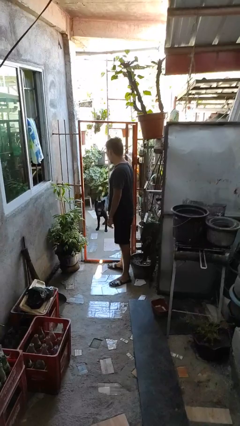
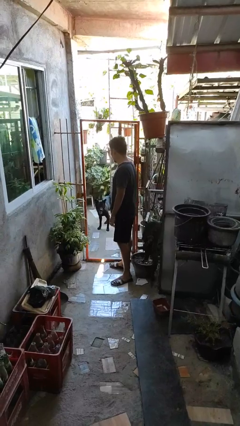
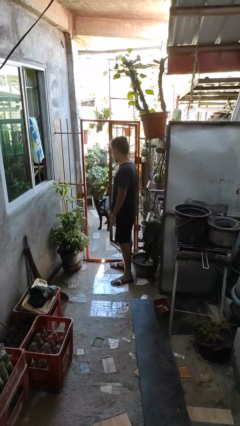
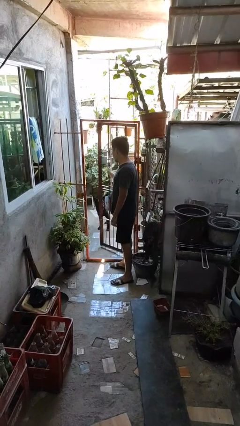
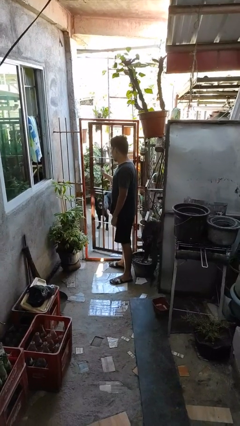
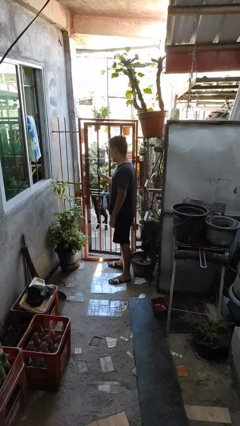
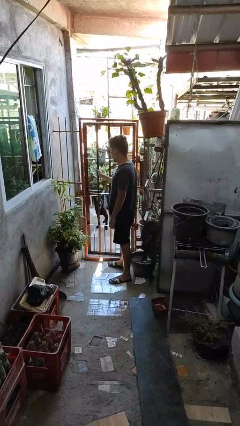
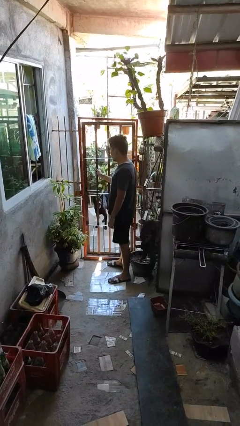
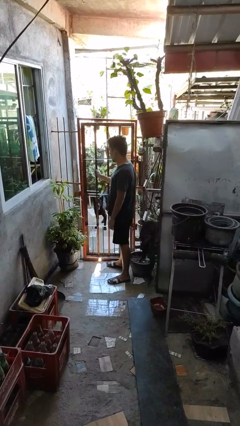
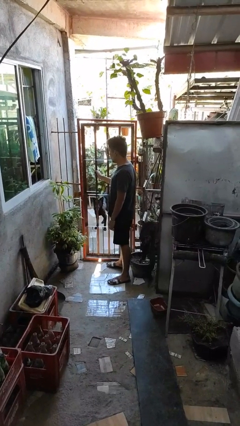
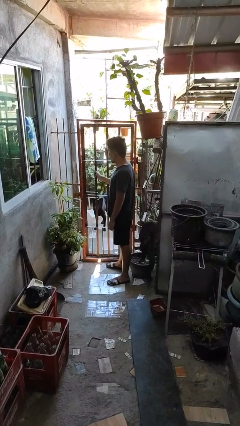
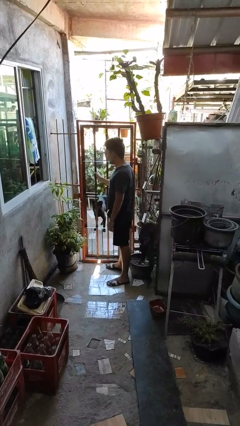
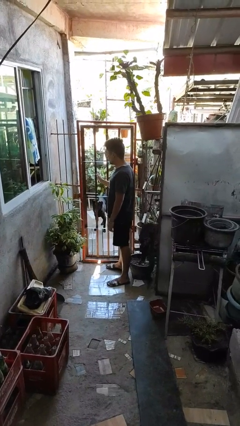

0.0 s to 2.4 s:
person closes gate

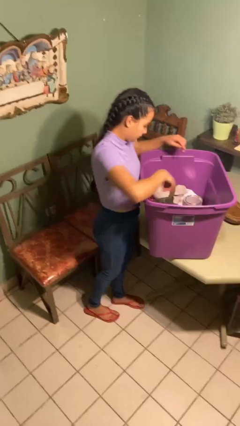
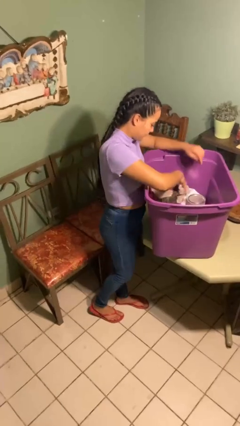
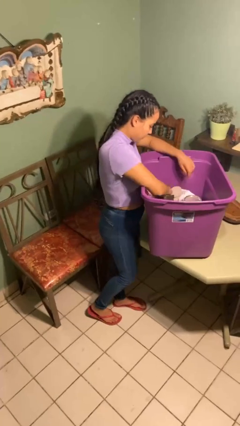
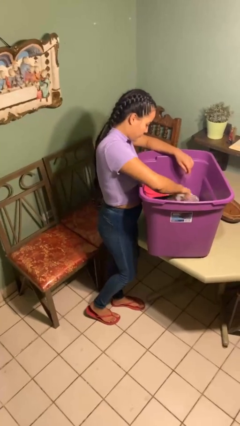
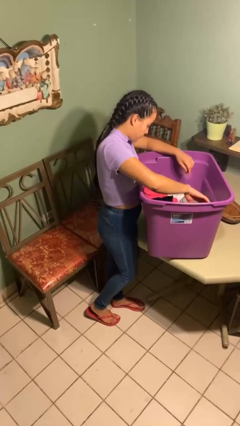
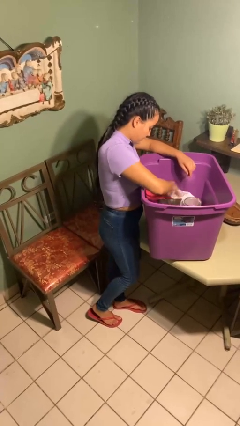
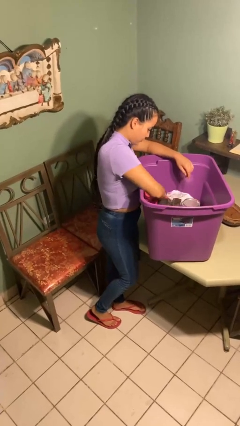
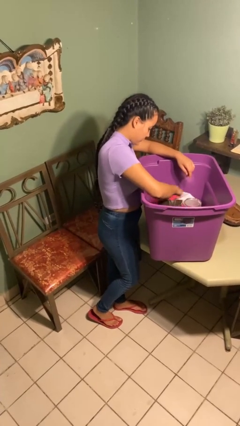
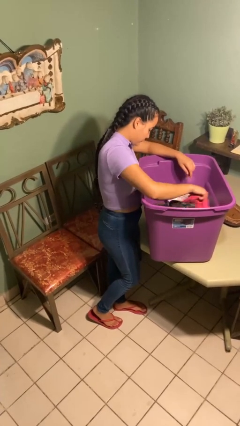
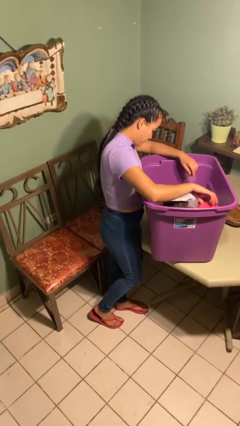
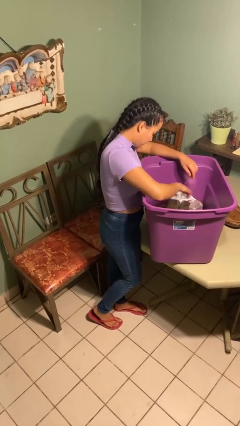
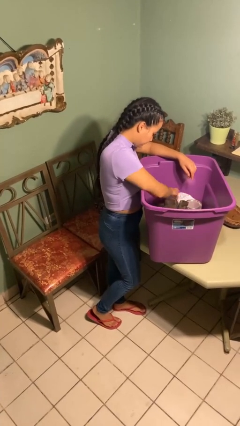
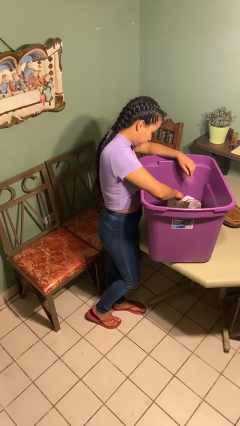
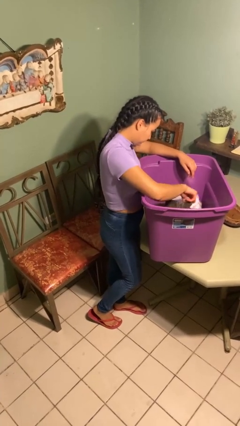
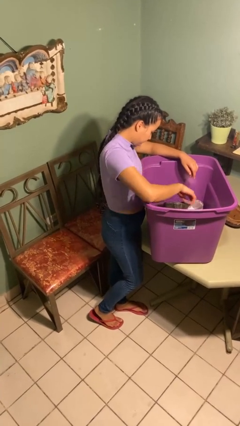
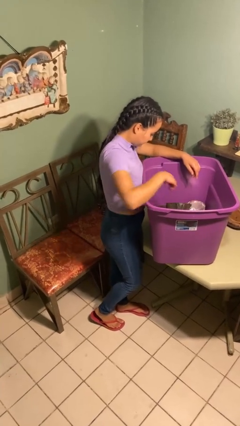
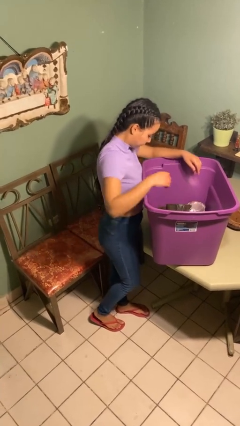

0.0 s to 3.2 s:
person searches in box

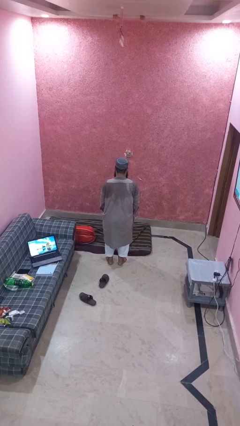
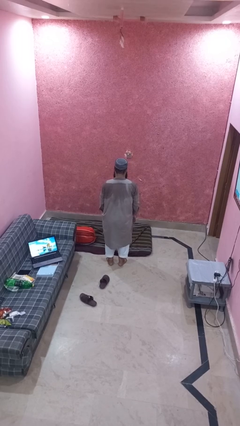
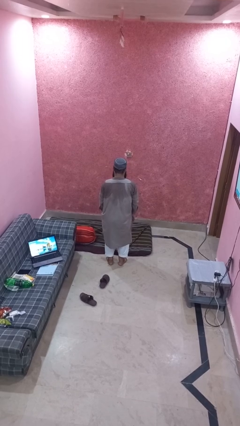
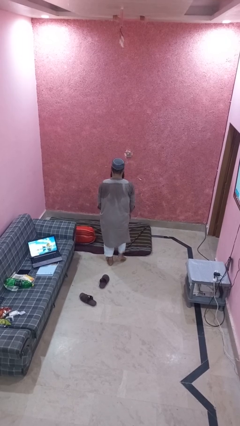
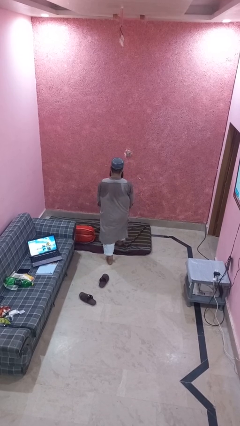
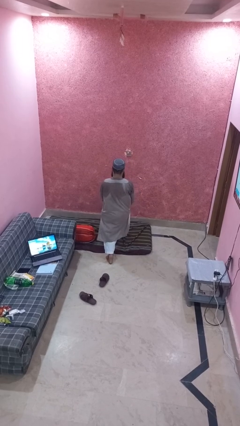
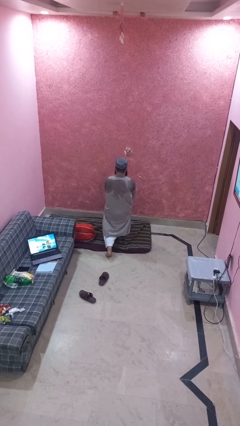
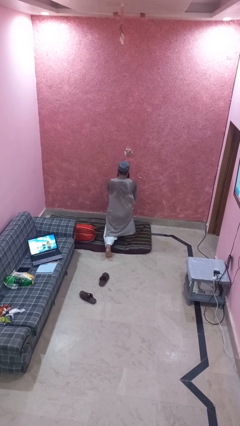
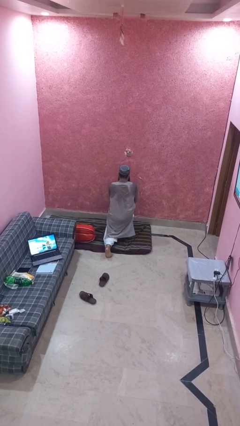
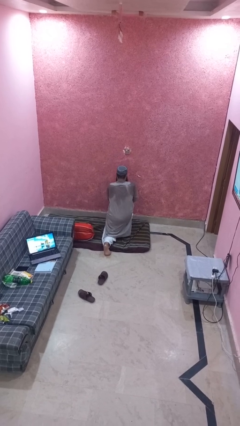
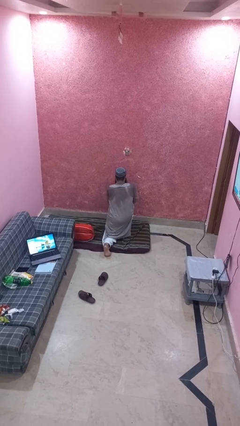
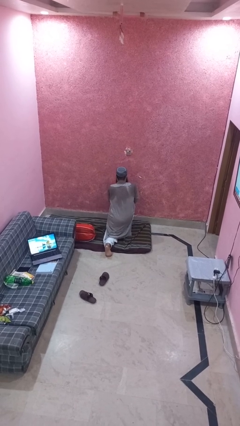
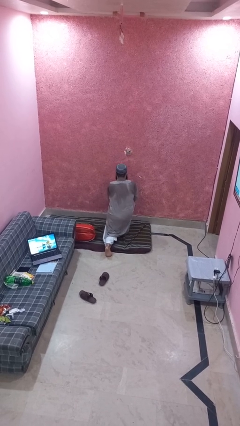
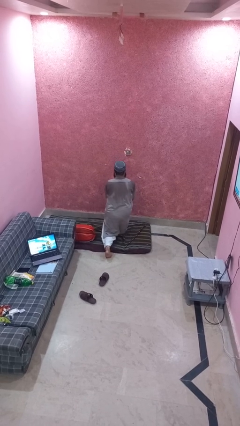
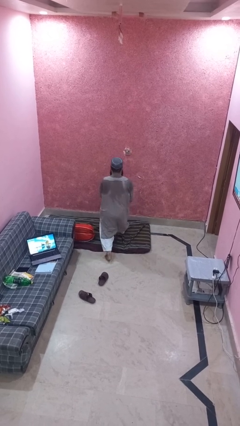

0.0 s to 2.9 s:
person exercises with lunges

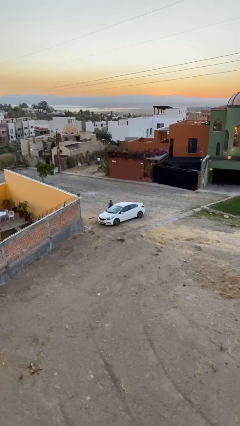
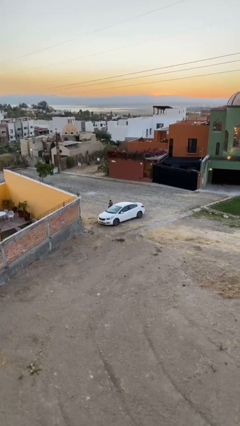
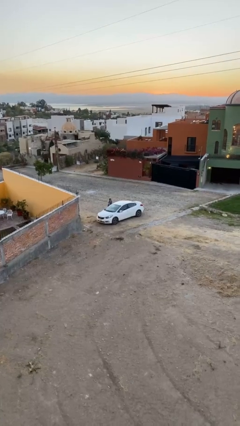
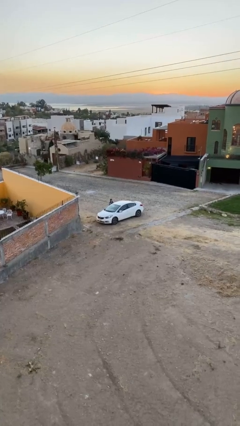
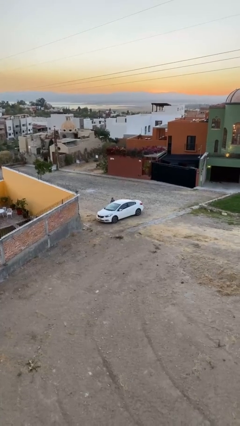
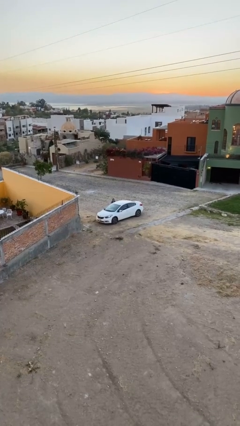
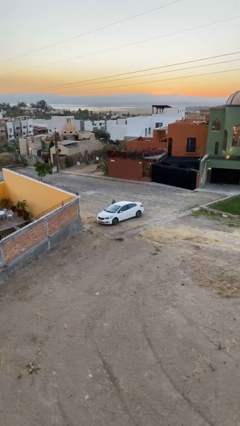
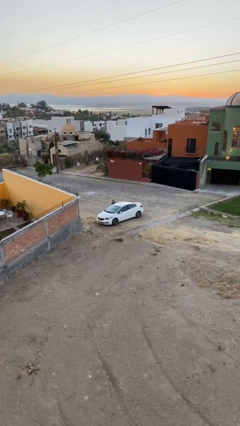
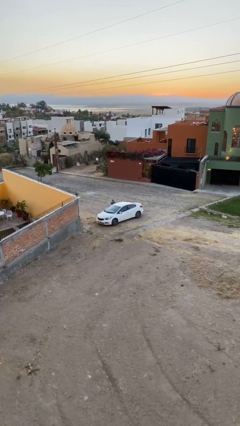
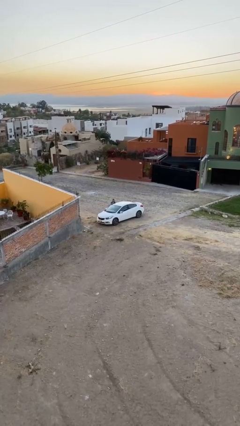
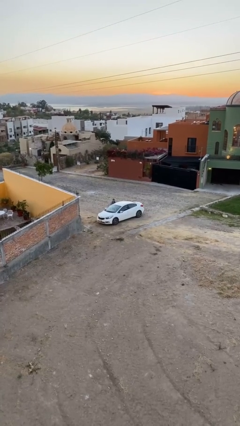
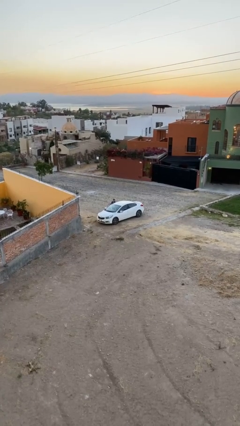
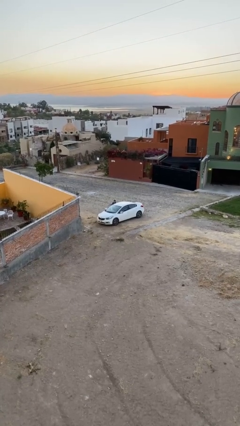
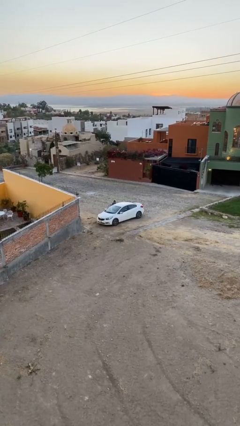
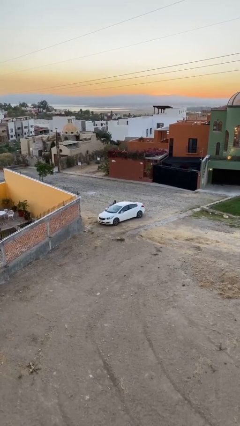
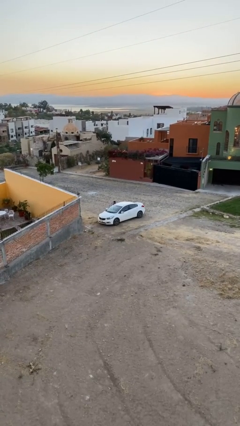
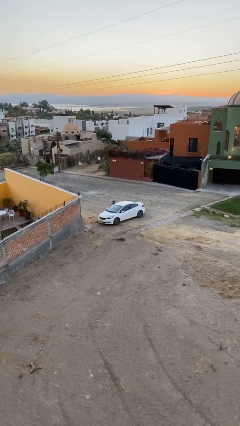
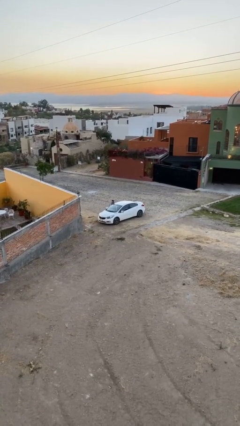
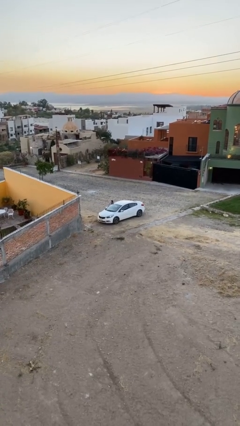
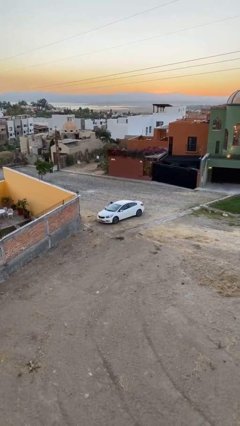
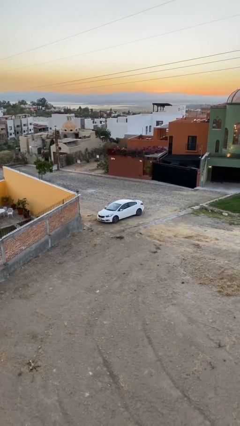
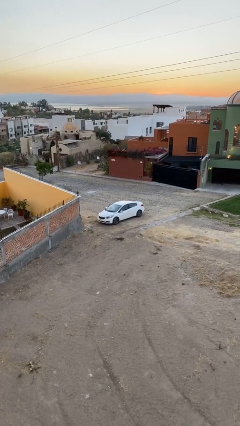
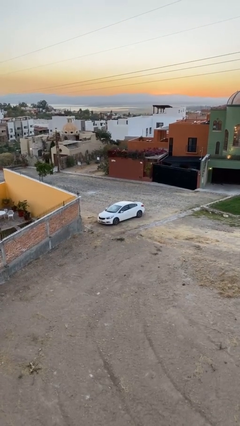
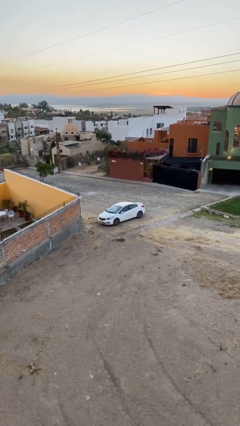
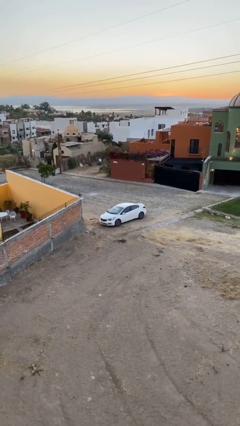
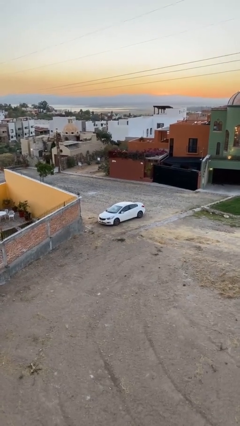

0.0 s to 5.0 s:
car picks up person

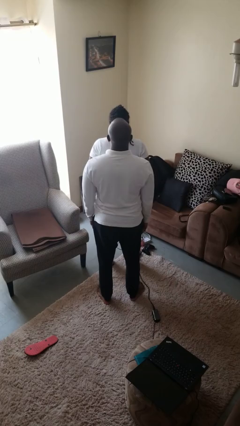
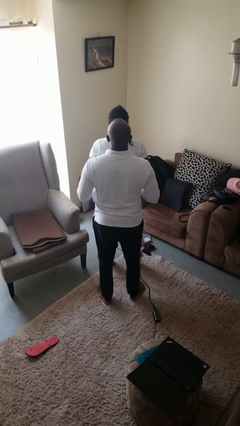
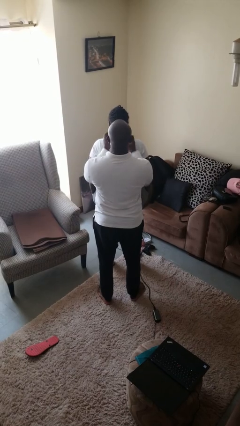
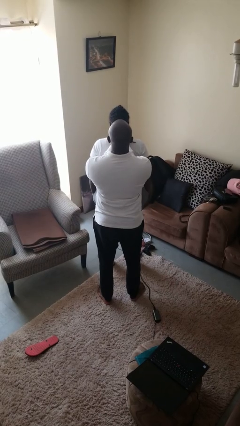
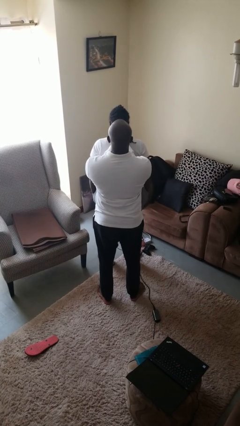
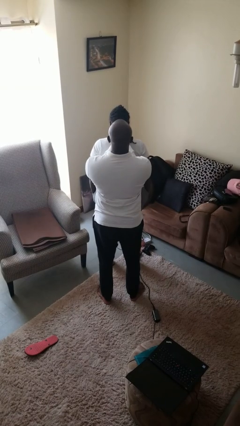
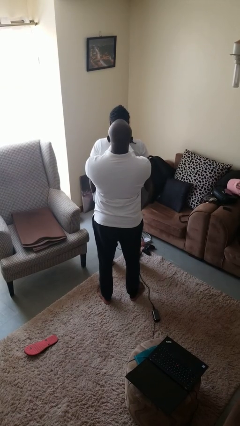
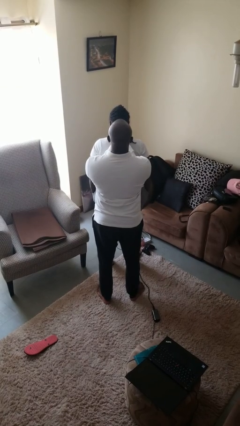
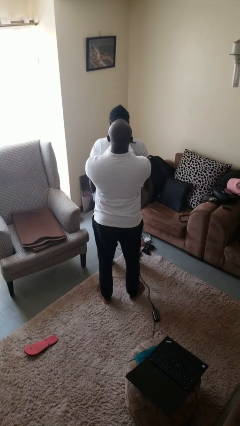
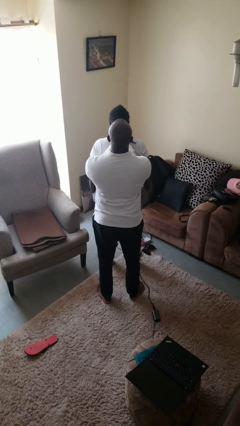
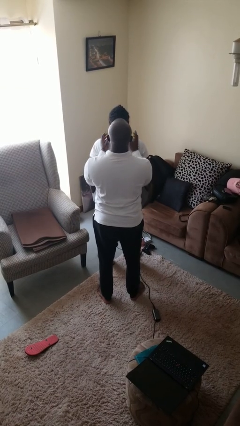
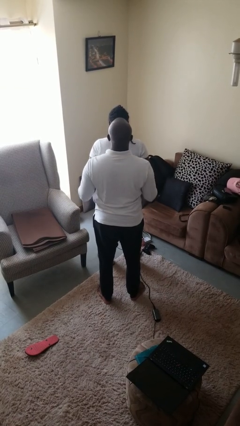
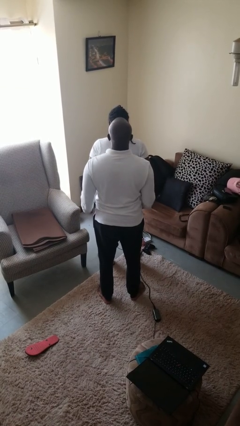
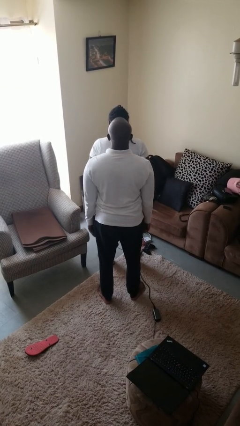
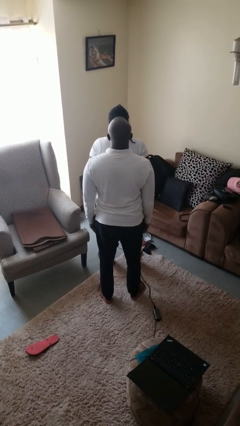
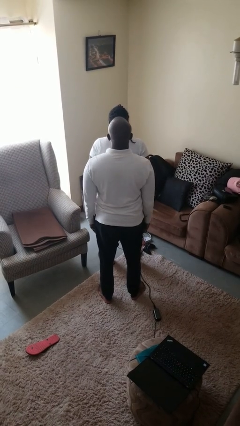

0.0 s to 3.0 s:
person grabs person by hair

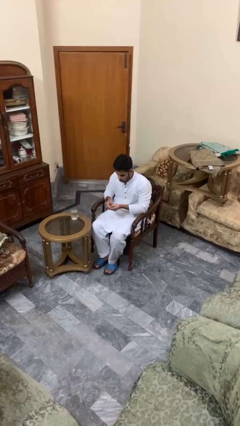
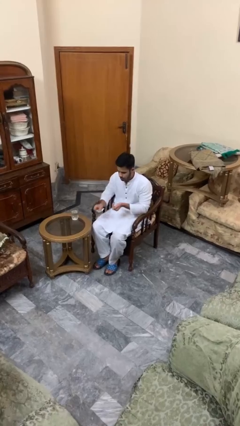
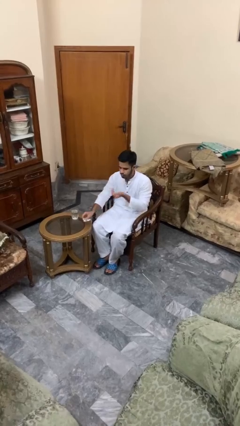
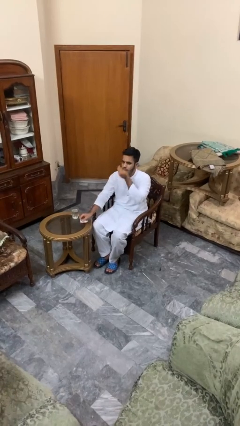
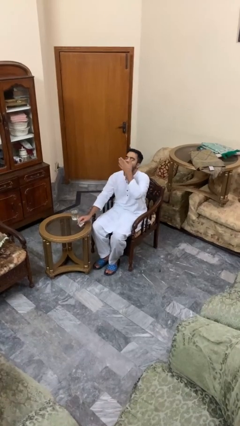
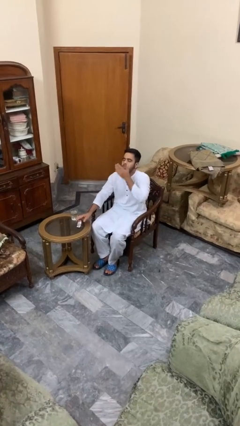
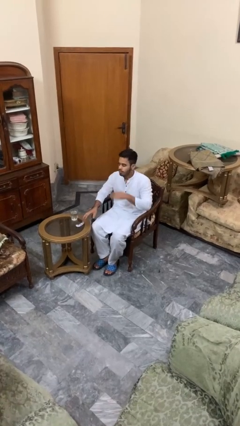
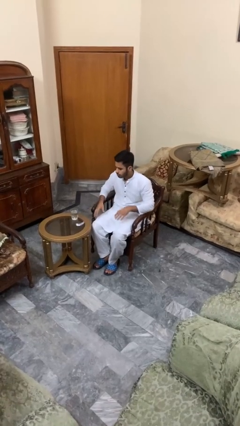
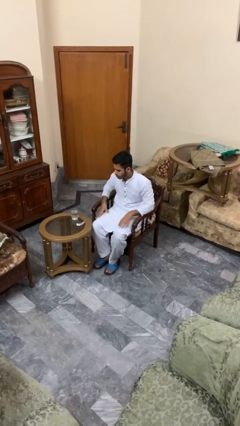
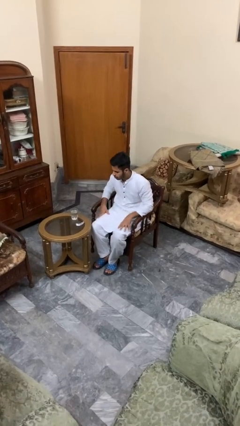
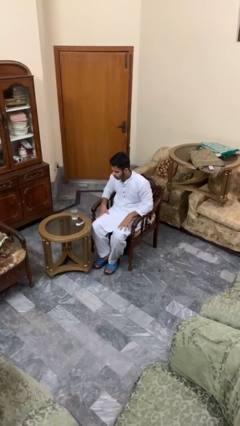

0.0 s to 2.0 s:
person takes medicine pills
